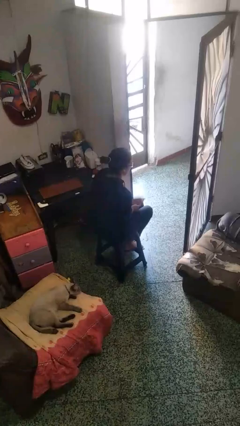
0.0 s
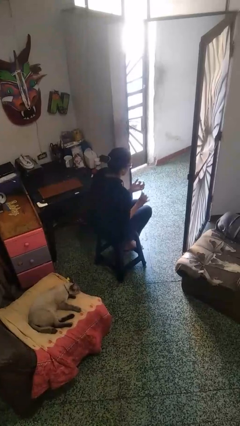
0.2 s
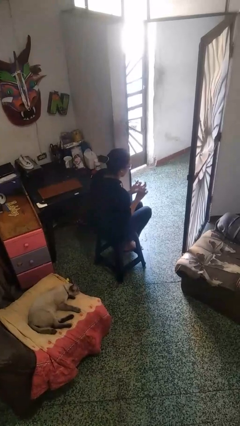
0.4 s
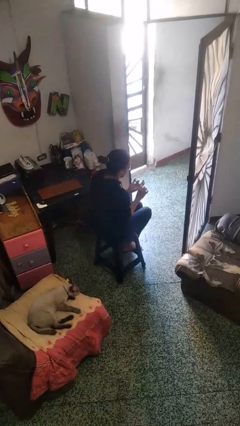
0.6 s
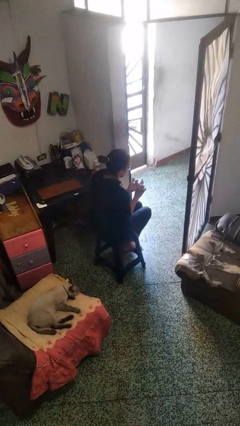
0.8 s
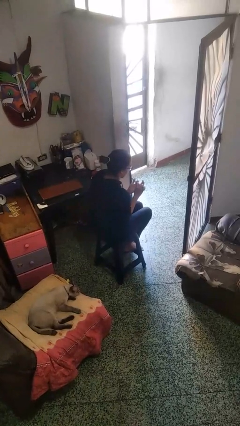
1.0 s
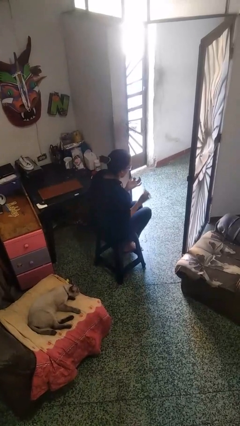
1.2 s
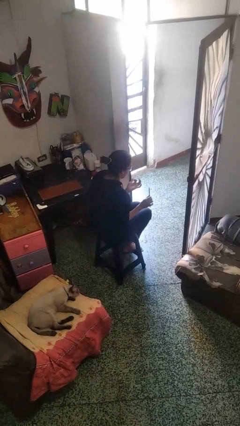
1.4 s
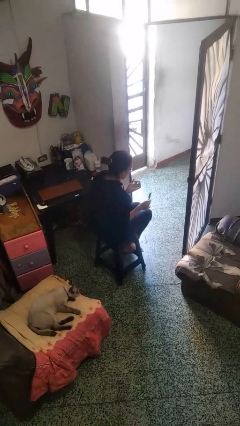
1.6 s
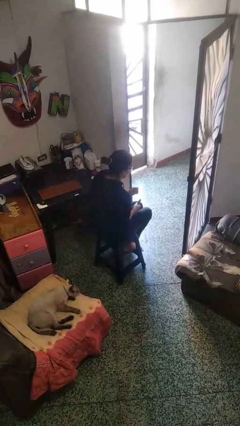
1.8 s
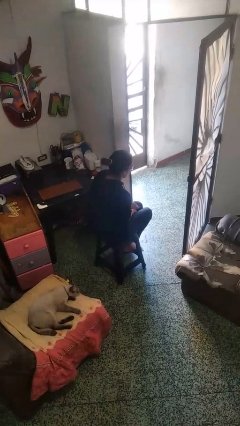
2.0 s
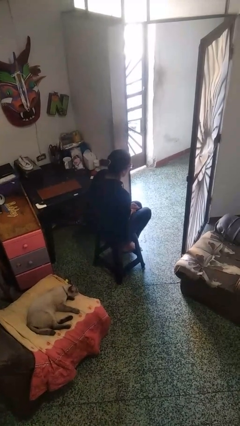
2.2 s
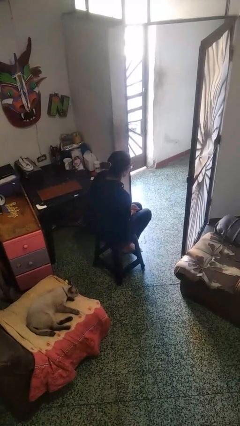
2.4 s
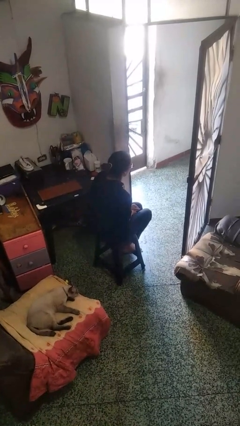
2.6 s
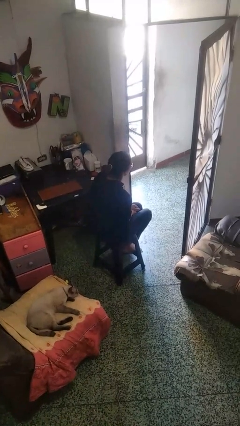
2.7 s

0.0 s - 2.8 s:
person files fingernails

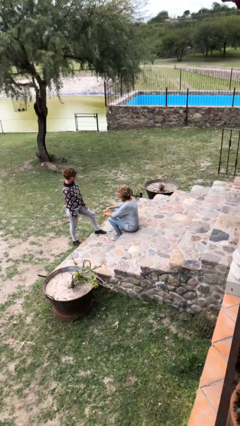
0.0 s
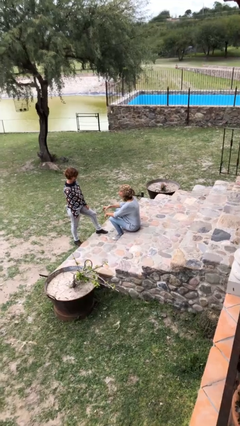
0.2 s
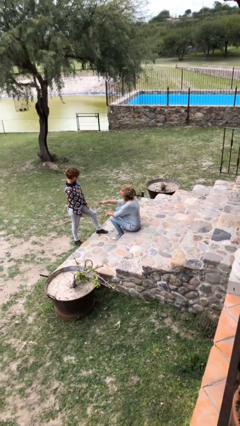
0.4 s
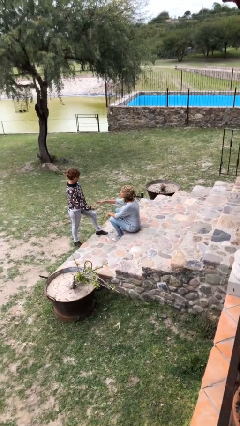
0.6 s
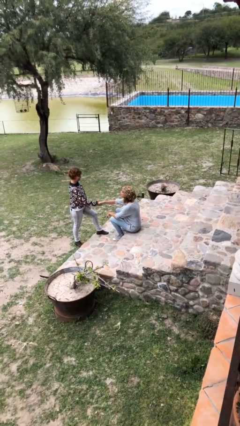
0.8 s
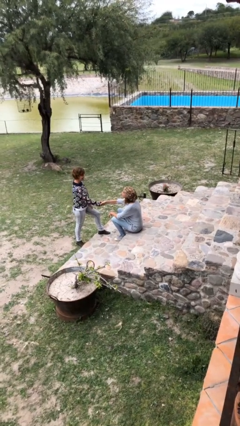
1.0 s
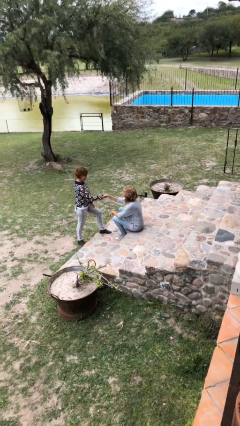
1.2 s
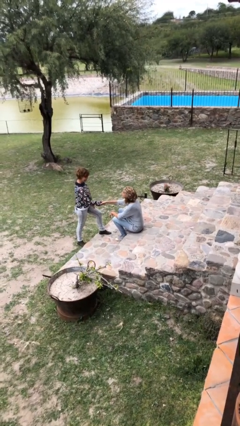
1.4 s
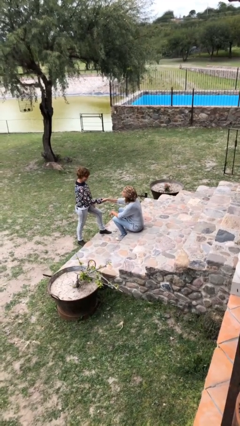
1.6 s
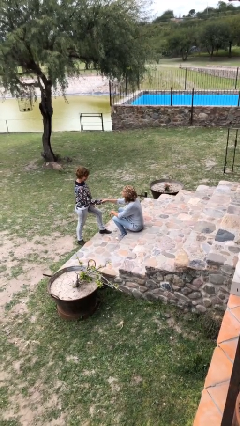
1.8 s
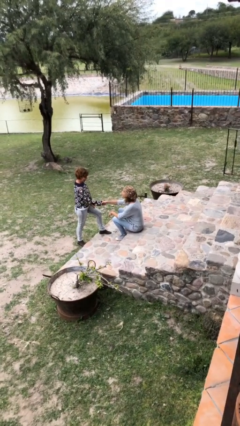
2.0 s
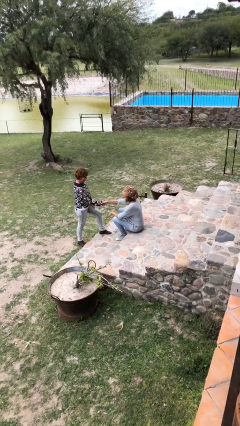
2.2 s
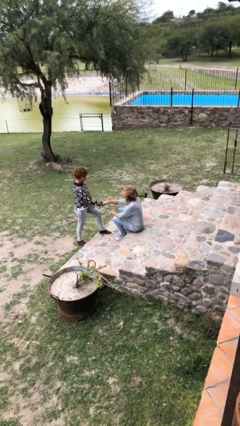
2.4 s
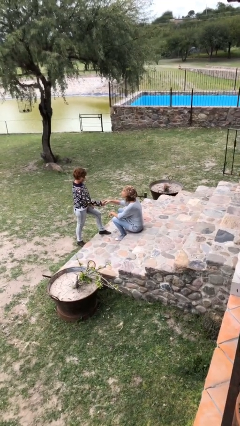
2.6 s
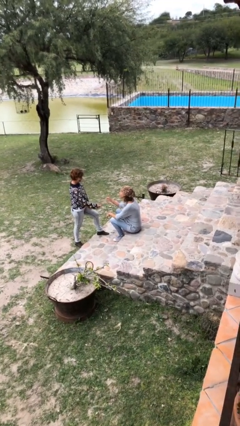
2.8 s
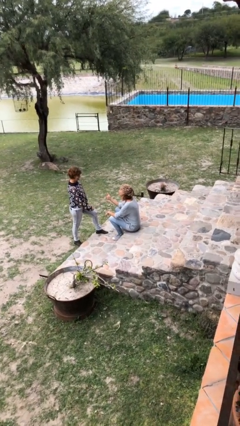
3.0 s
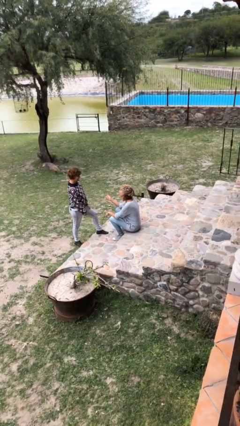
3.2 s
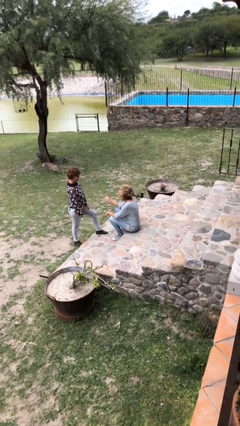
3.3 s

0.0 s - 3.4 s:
person shakes hand

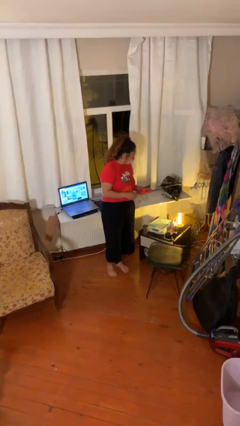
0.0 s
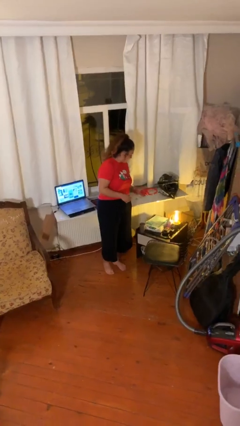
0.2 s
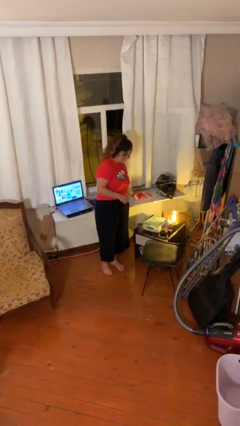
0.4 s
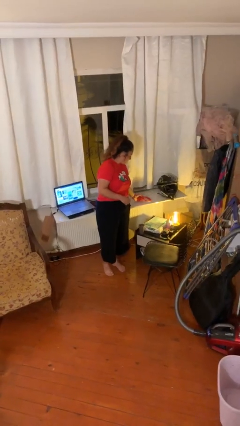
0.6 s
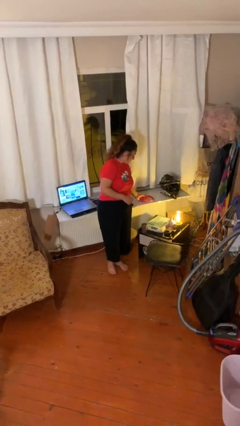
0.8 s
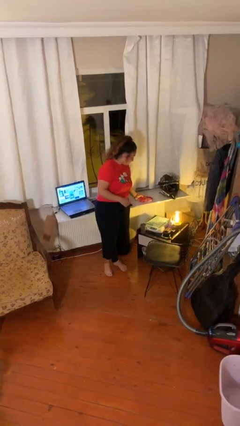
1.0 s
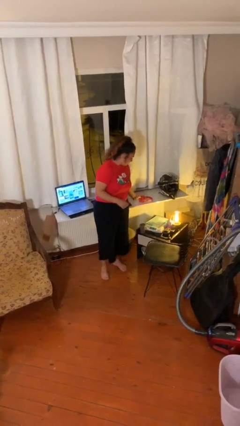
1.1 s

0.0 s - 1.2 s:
person puts down object on table

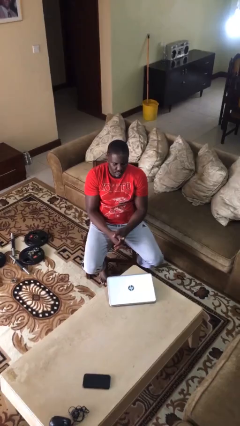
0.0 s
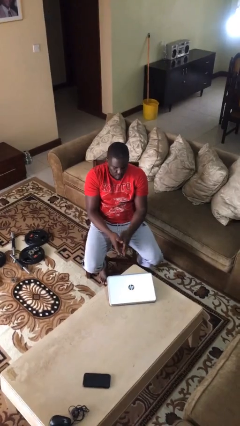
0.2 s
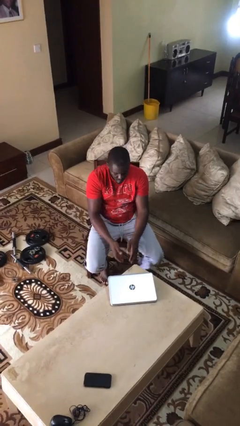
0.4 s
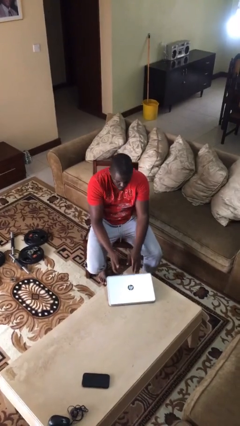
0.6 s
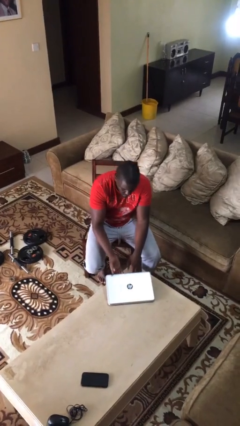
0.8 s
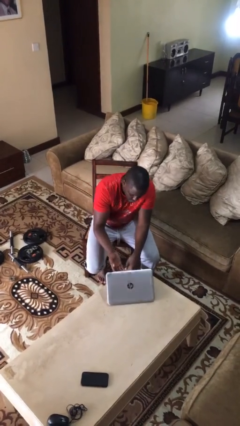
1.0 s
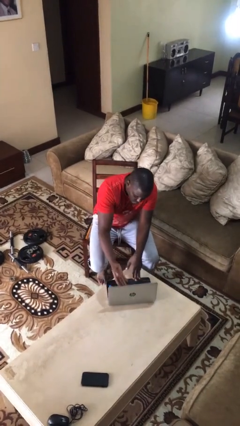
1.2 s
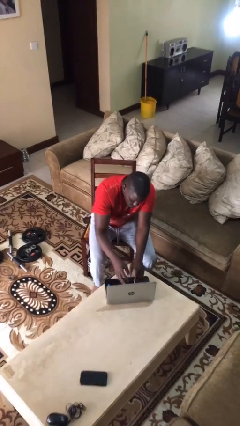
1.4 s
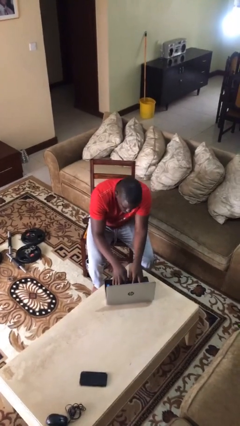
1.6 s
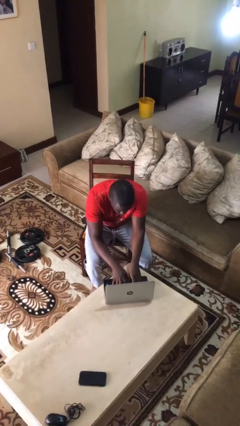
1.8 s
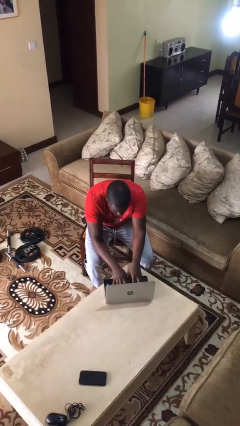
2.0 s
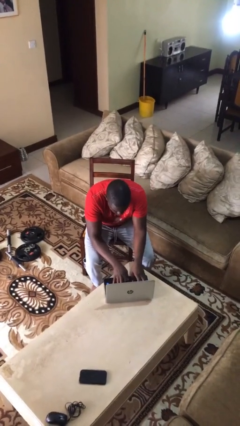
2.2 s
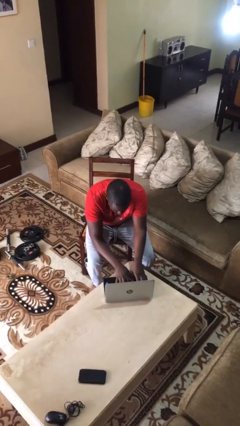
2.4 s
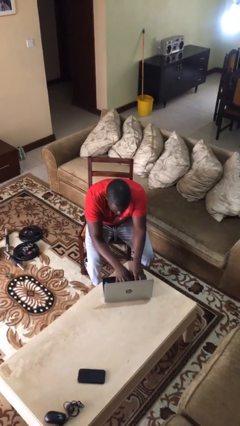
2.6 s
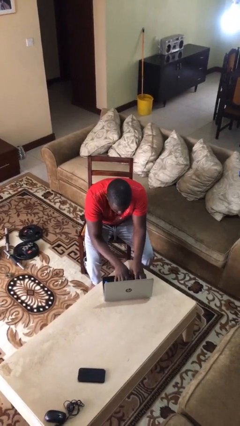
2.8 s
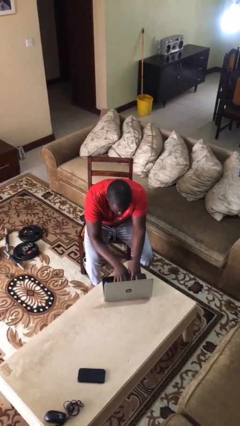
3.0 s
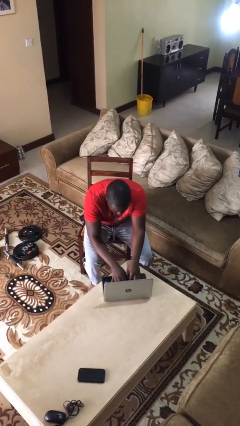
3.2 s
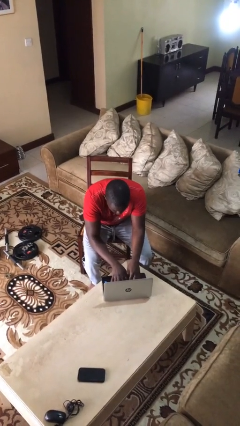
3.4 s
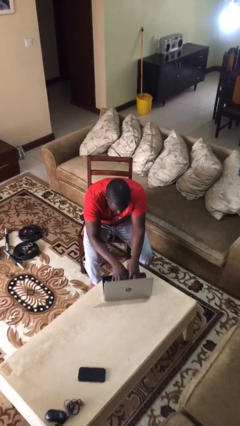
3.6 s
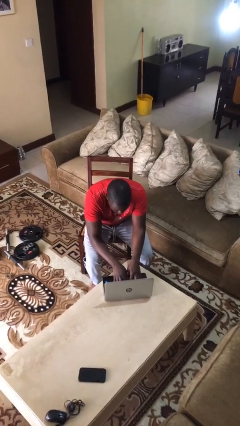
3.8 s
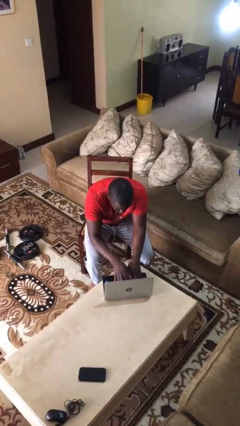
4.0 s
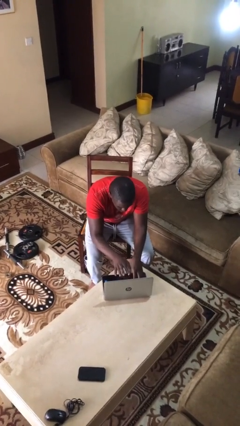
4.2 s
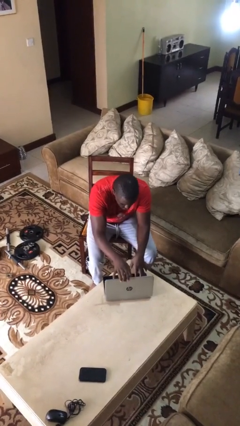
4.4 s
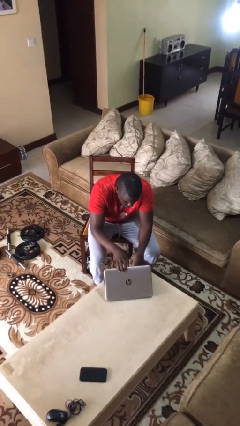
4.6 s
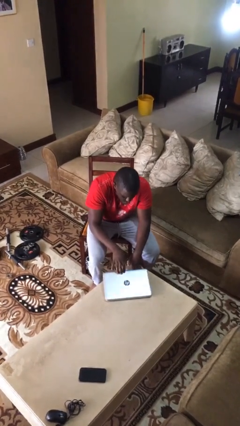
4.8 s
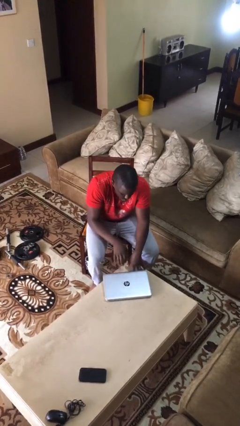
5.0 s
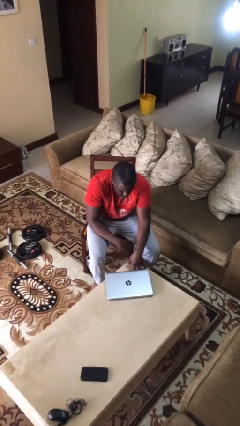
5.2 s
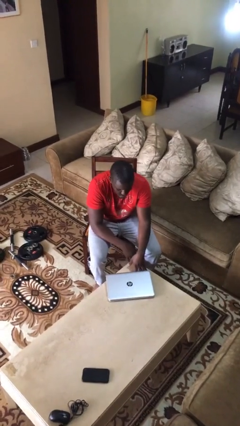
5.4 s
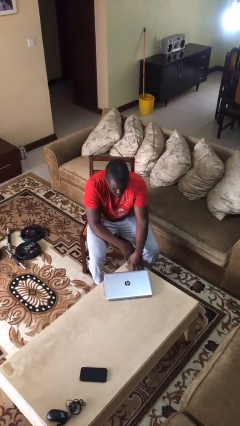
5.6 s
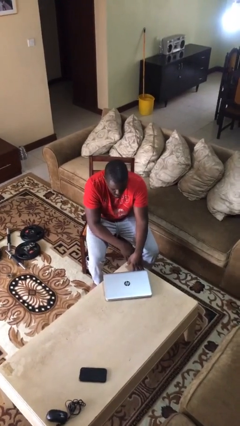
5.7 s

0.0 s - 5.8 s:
person interacts with laptop

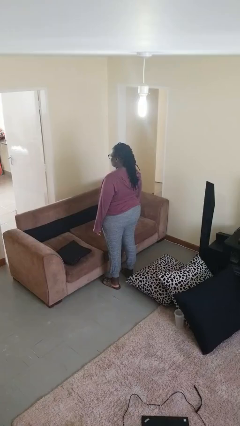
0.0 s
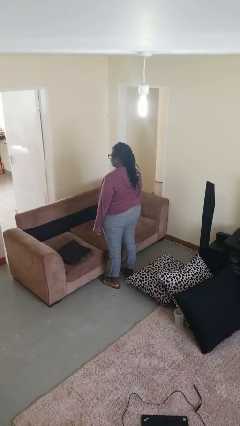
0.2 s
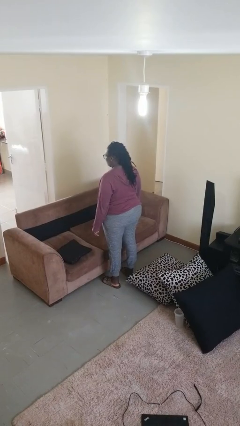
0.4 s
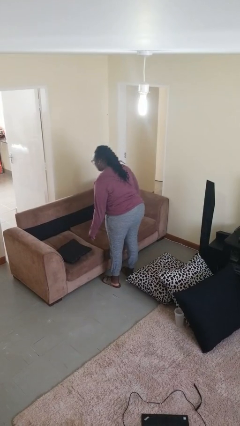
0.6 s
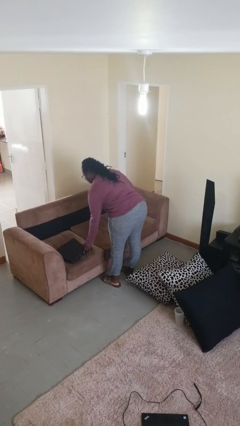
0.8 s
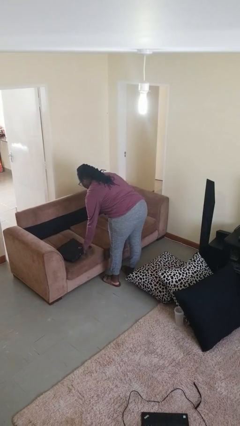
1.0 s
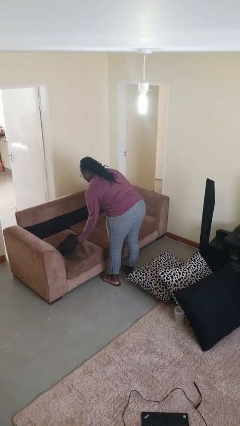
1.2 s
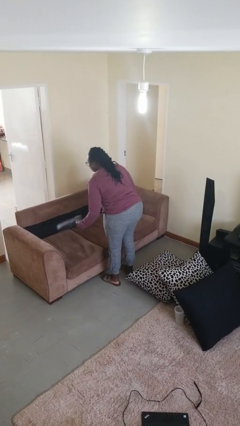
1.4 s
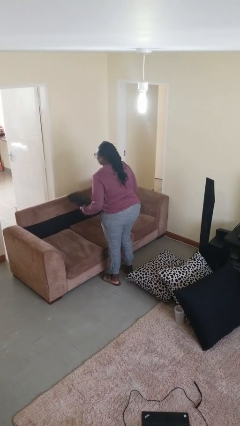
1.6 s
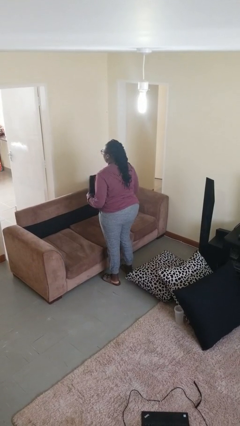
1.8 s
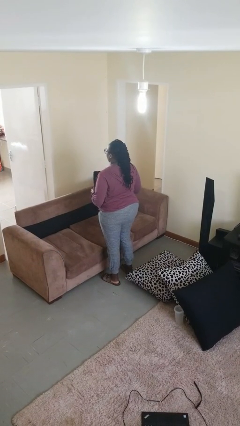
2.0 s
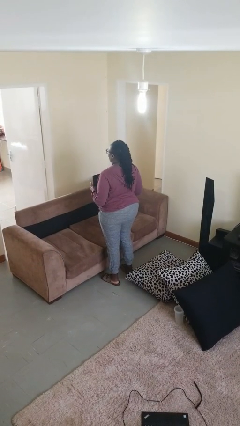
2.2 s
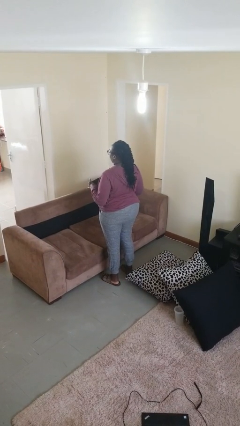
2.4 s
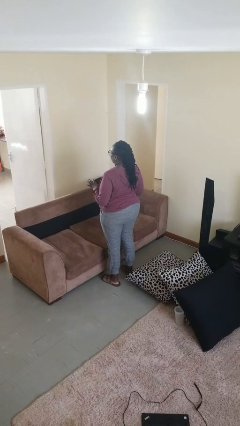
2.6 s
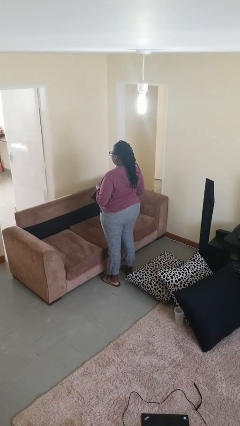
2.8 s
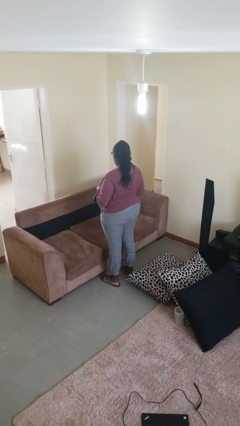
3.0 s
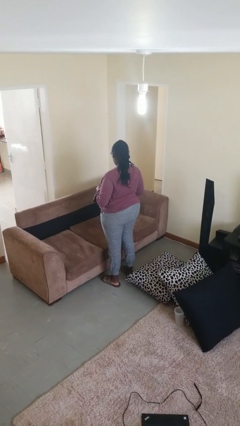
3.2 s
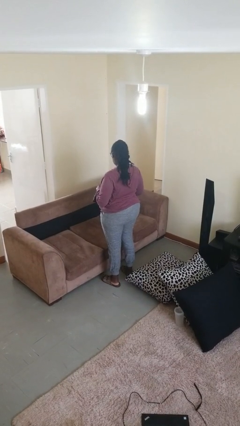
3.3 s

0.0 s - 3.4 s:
person picks up object from couch

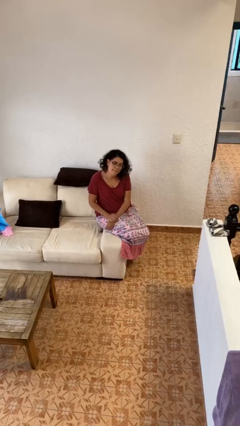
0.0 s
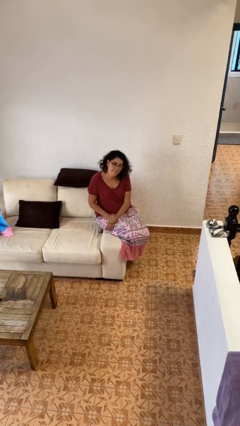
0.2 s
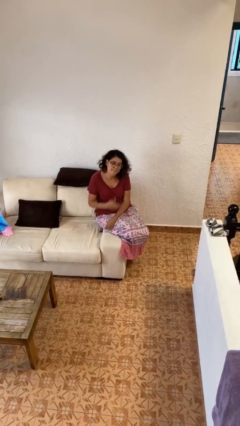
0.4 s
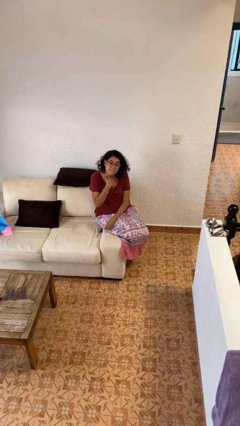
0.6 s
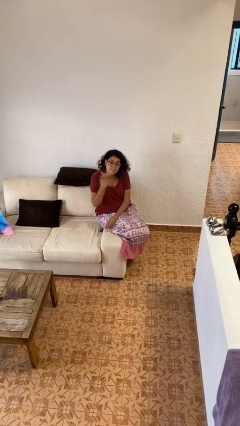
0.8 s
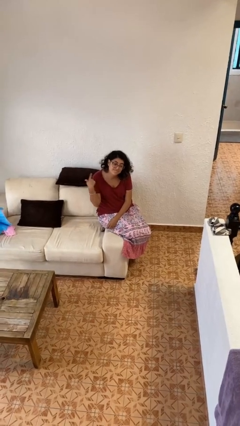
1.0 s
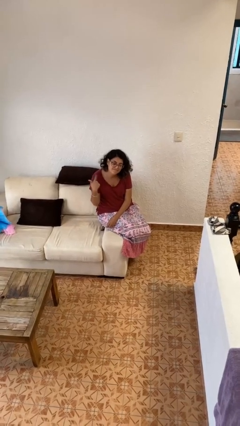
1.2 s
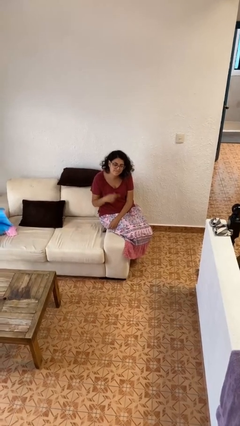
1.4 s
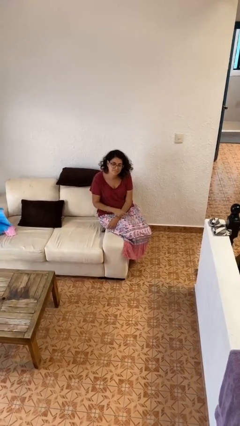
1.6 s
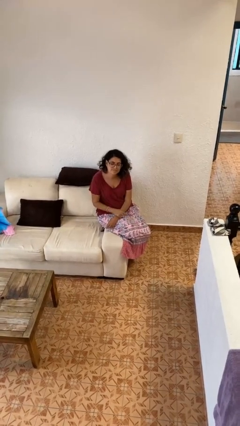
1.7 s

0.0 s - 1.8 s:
person gestures cut
